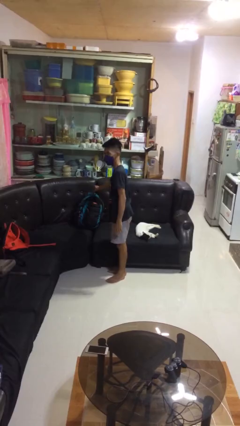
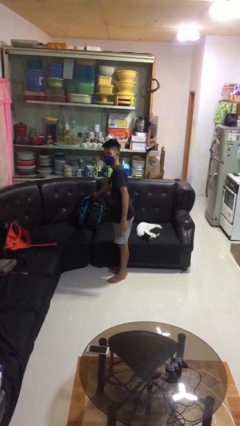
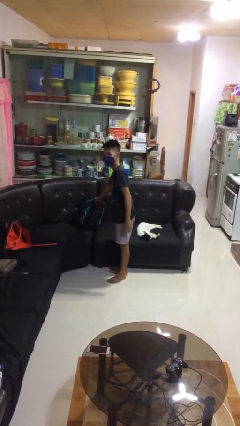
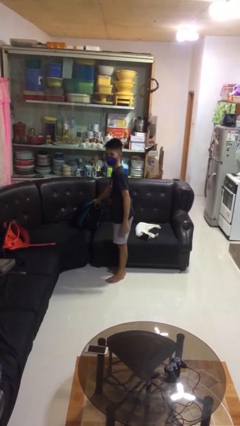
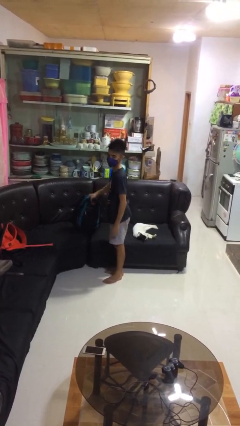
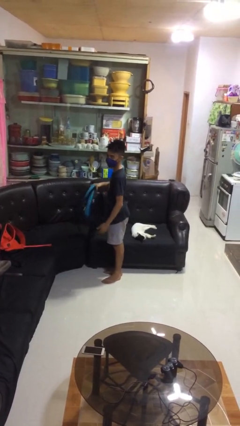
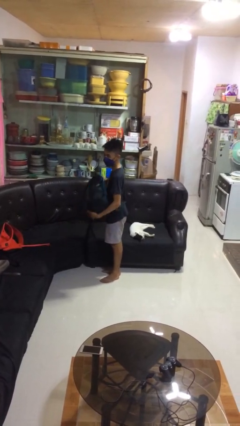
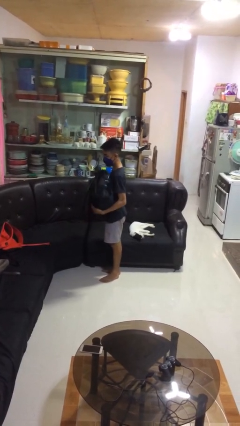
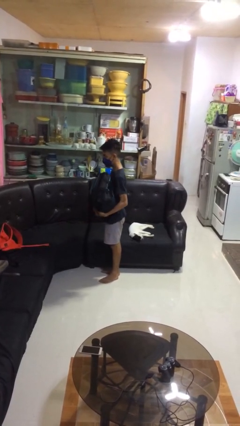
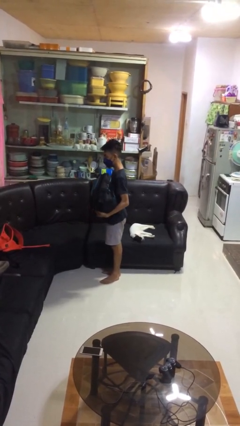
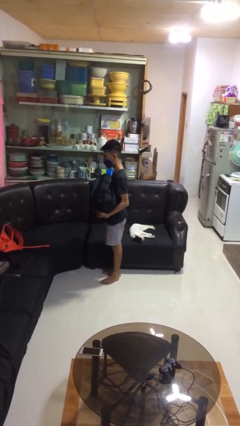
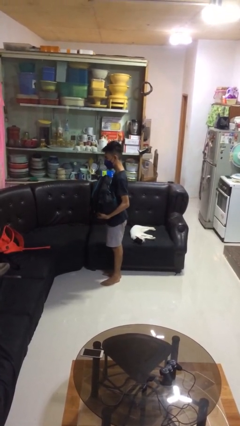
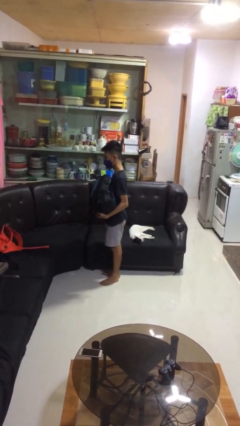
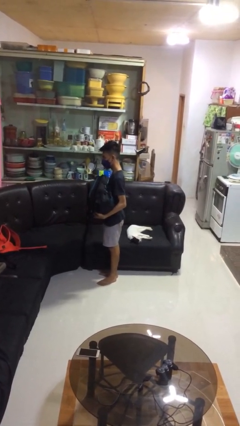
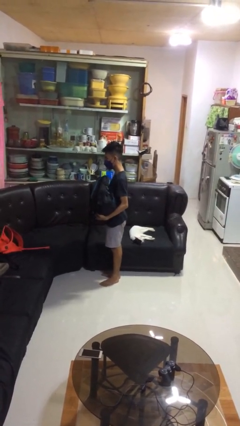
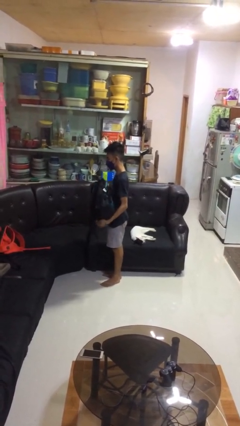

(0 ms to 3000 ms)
person picks up object from couch

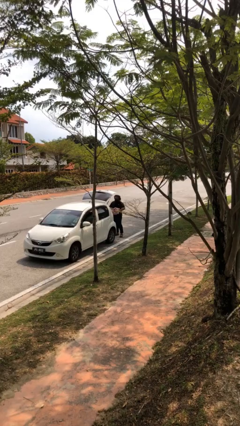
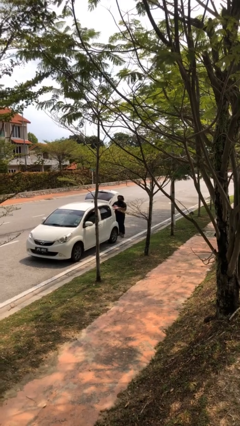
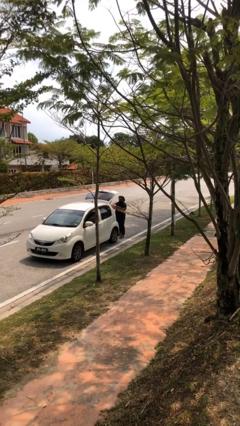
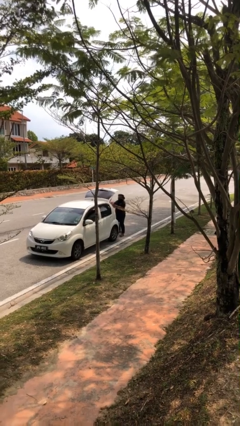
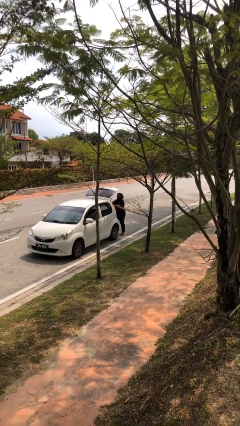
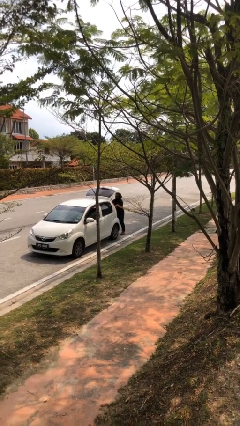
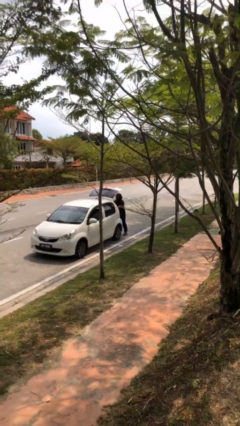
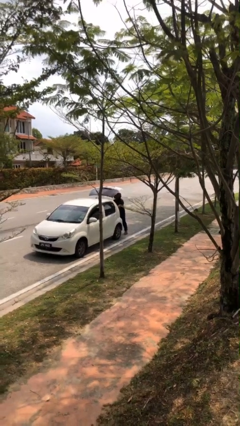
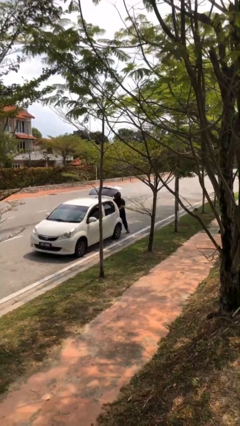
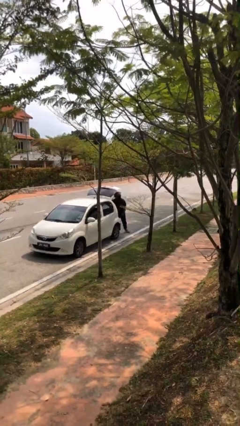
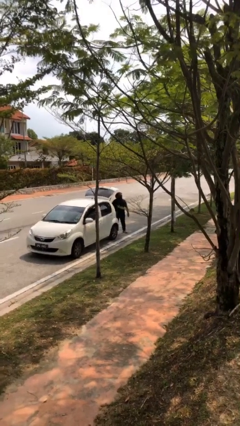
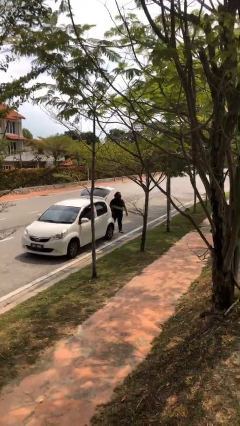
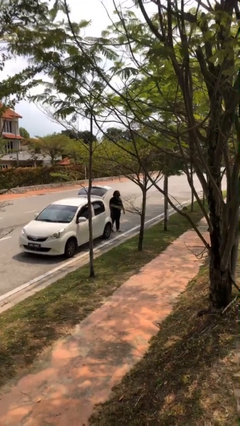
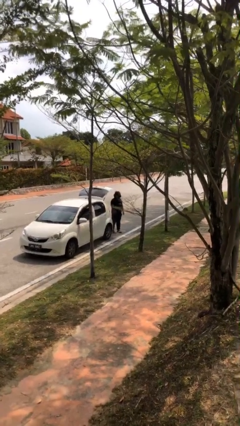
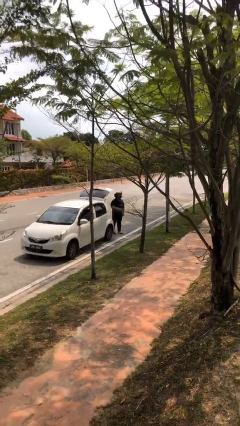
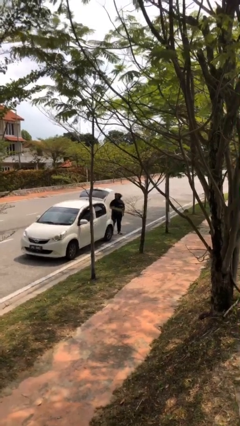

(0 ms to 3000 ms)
person loads car

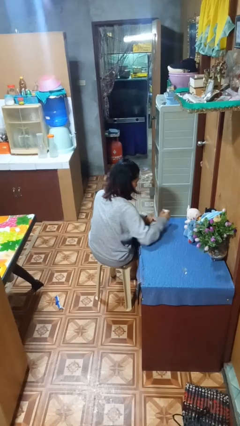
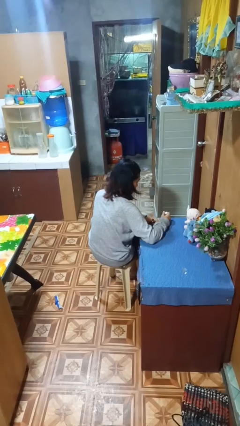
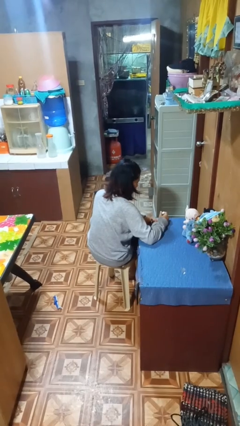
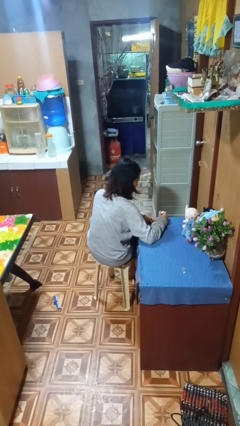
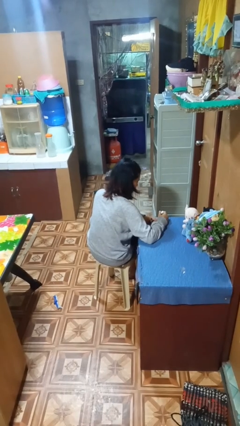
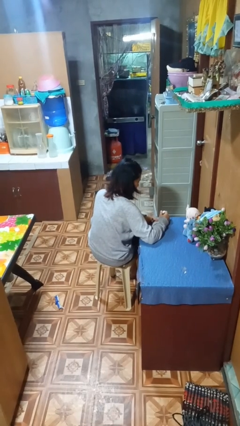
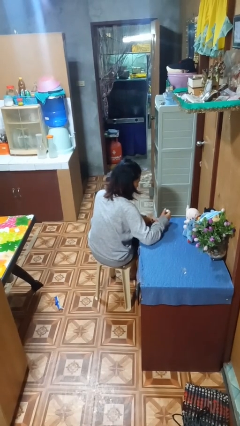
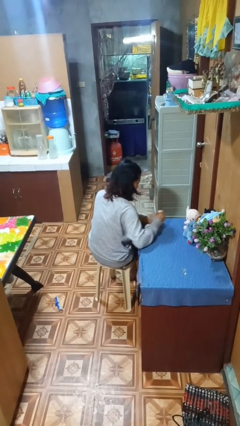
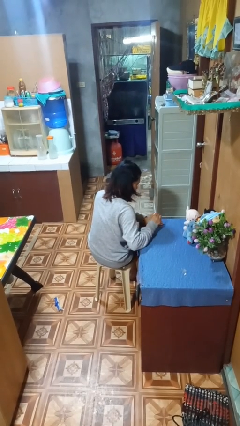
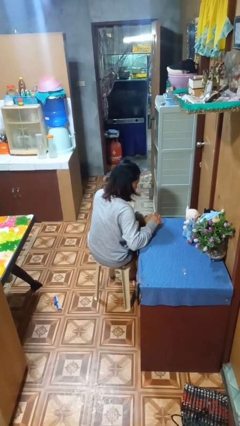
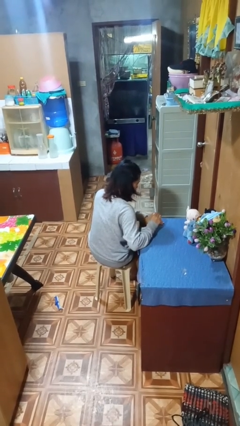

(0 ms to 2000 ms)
person paints fingernails

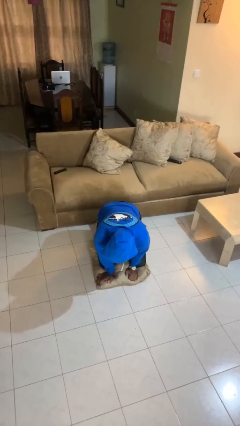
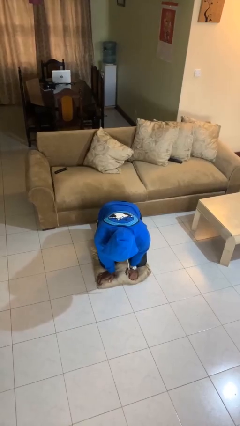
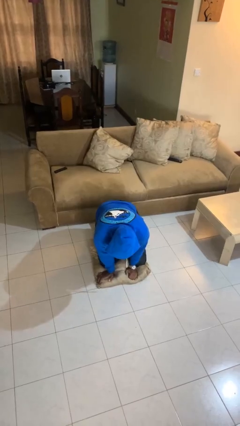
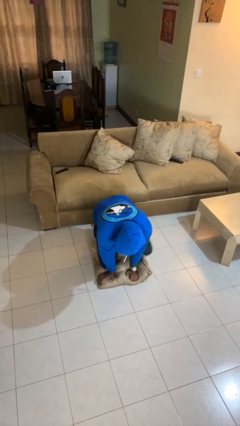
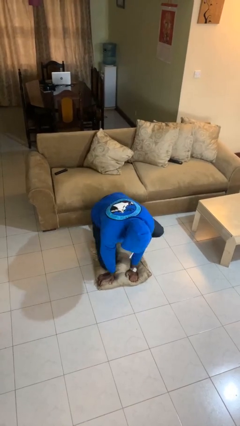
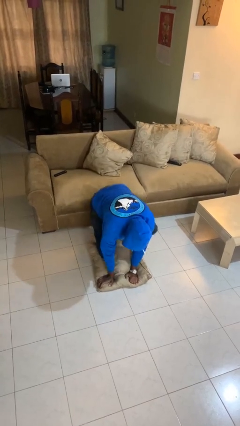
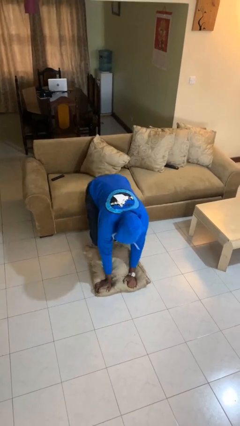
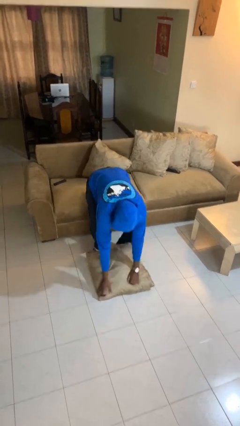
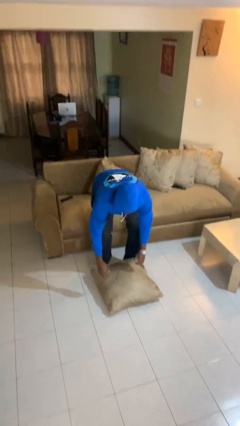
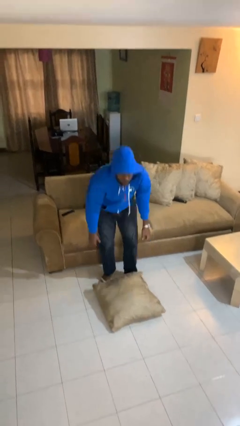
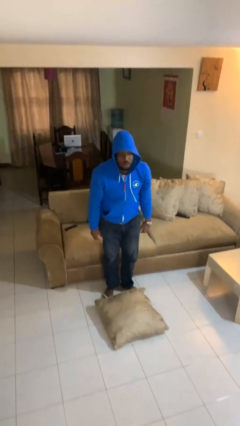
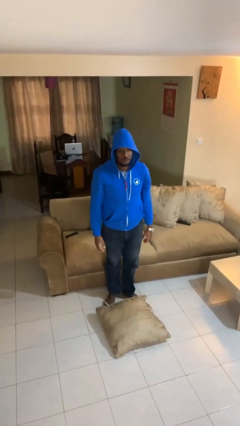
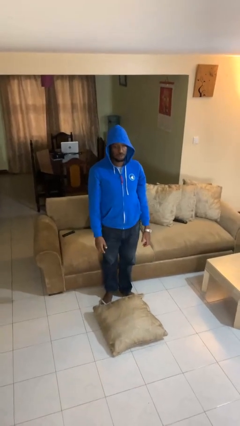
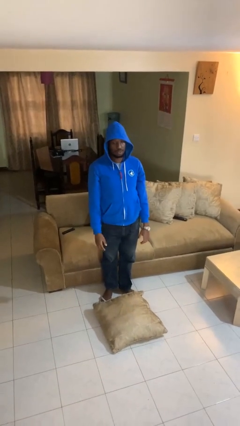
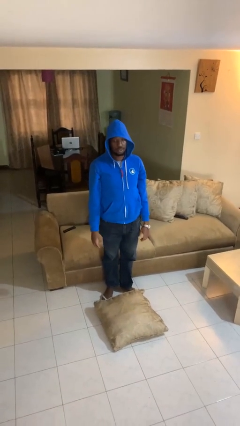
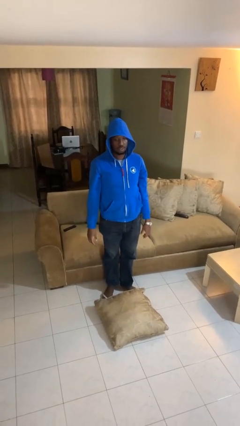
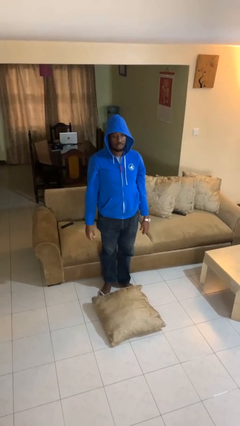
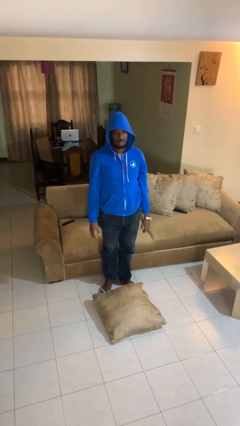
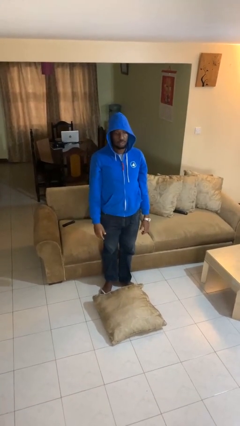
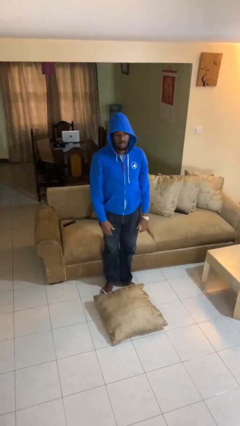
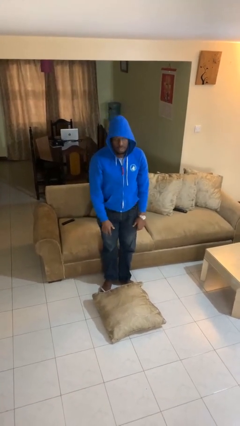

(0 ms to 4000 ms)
person stands up from floor

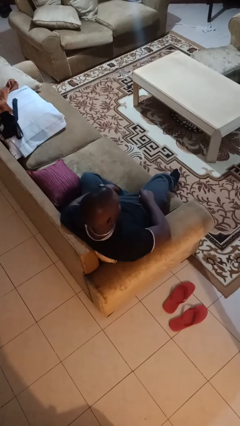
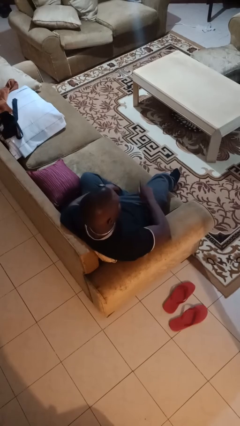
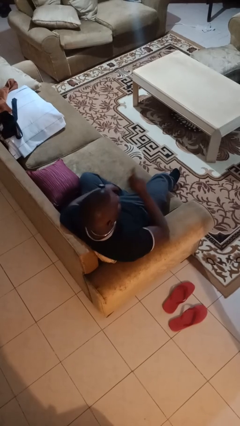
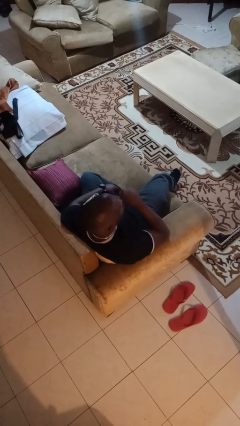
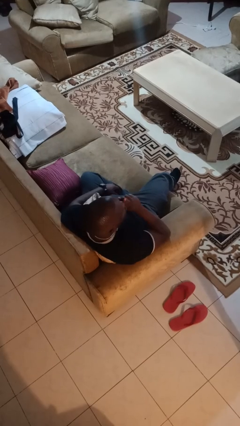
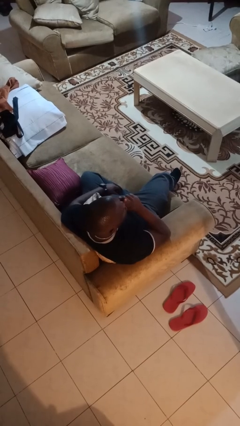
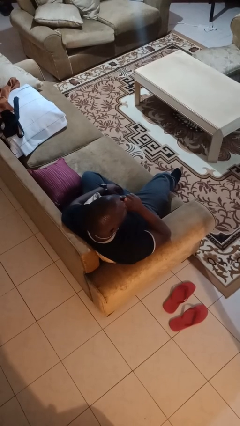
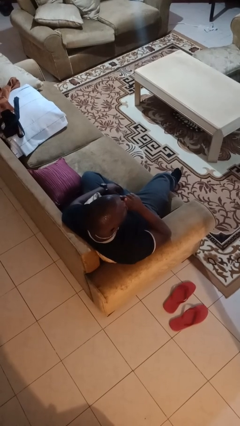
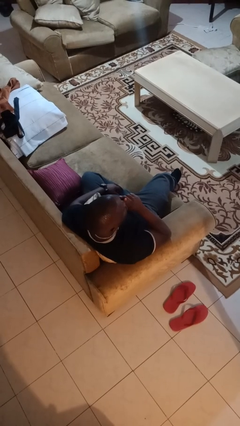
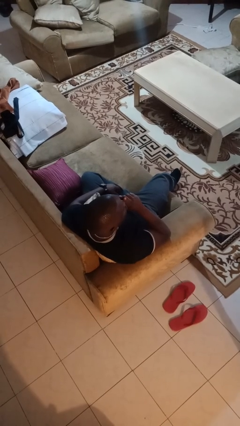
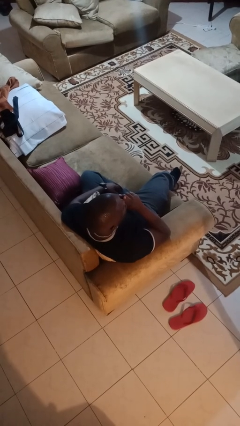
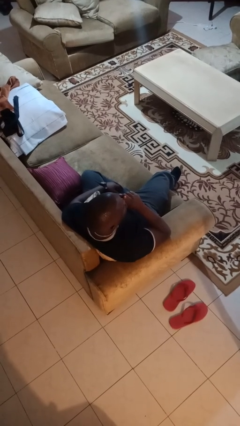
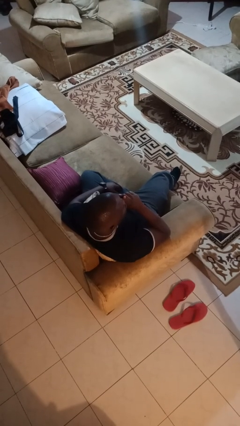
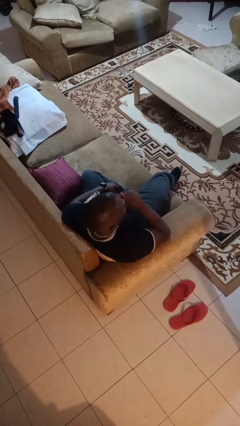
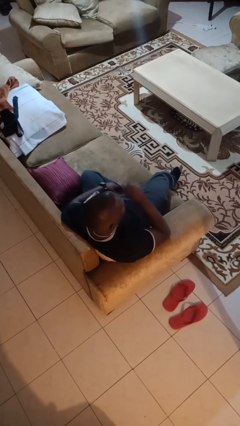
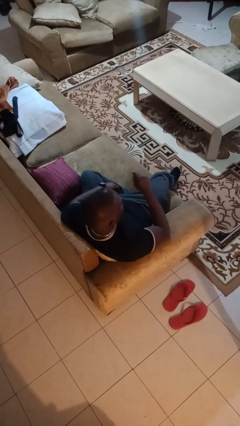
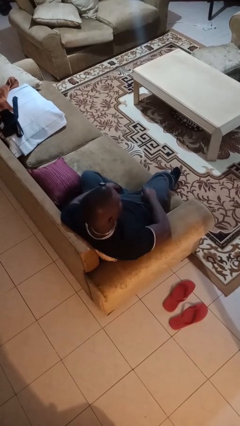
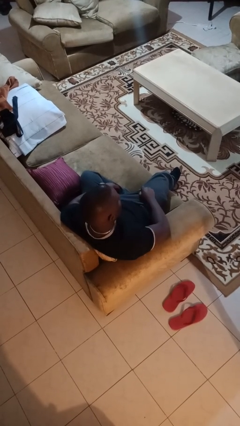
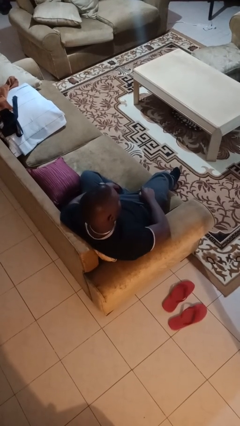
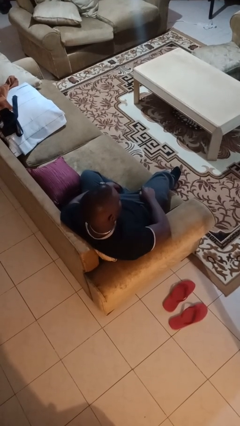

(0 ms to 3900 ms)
person gestures be quiet

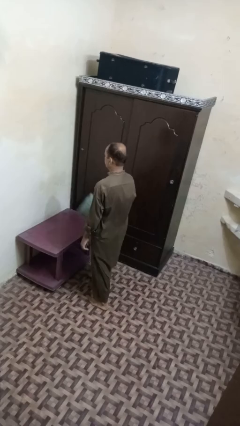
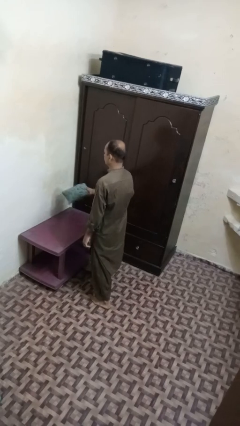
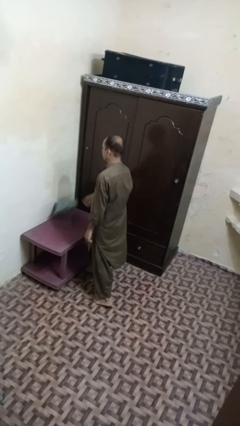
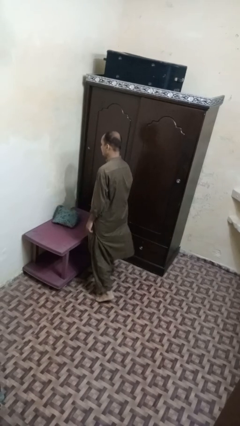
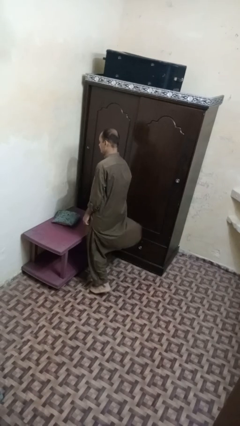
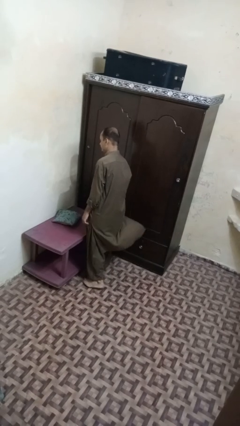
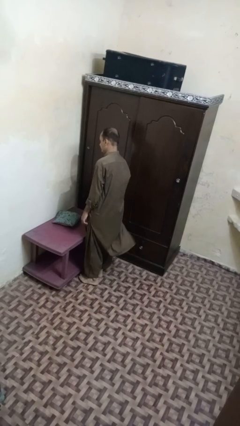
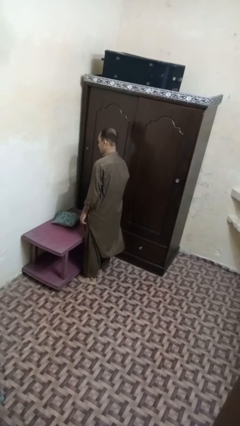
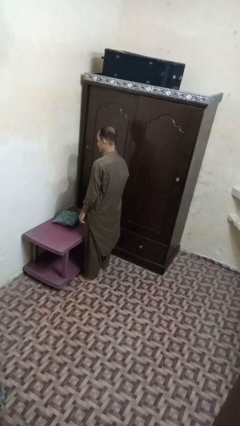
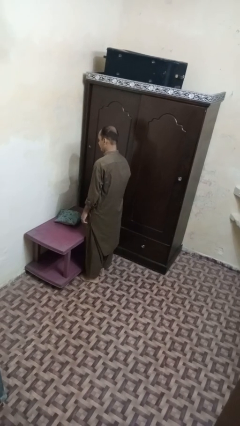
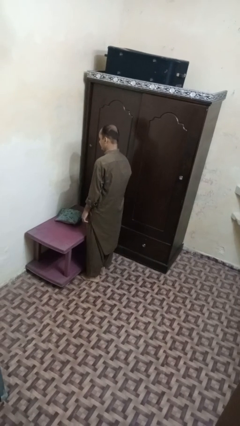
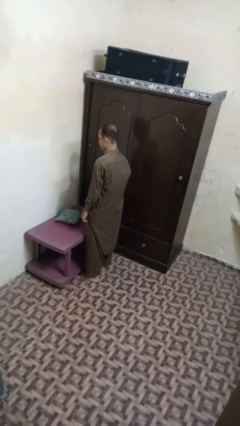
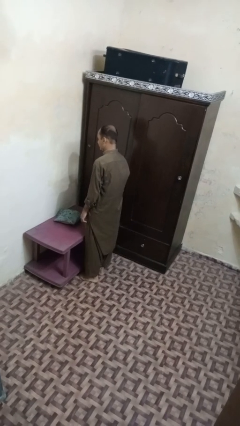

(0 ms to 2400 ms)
person throws object on table
